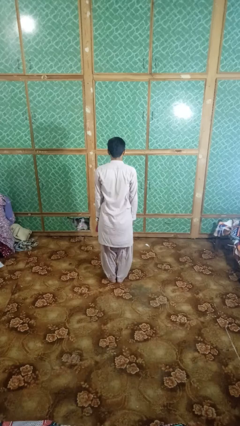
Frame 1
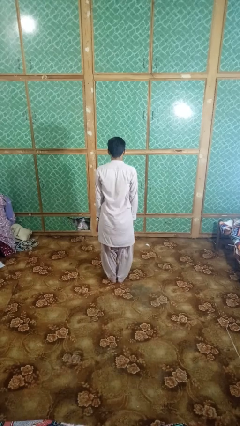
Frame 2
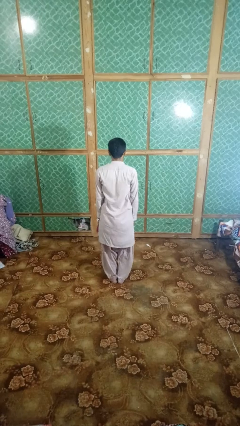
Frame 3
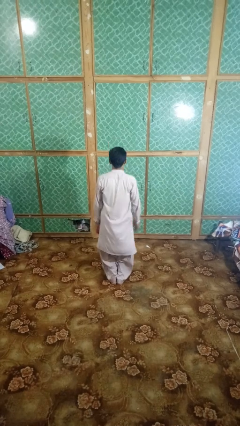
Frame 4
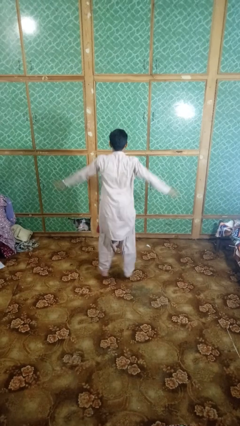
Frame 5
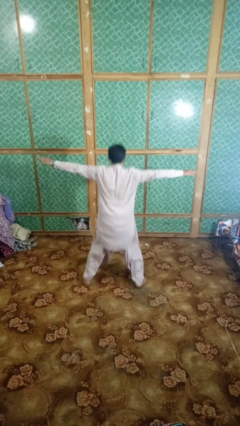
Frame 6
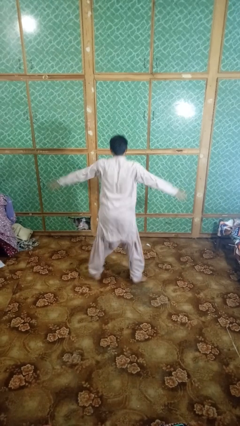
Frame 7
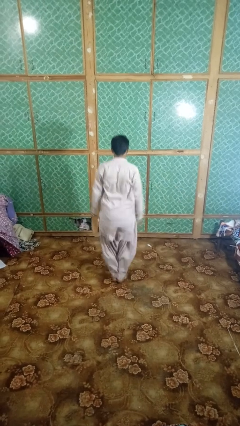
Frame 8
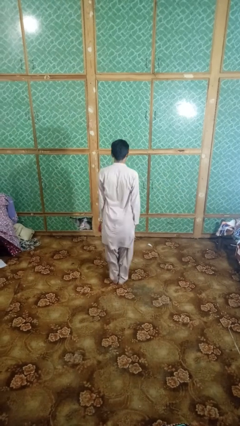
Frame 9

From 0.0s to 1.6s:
person exercises with jumping jacks

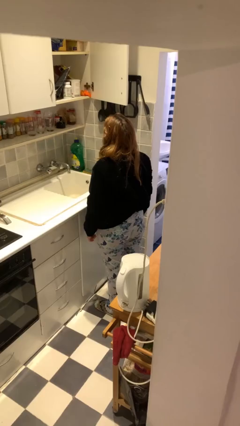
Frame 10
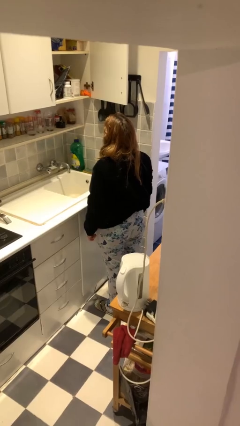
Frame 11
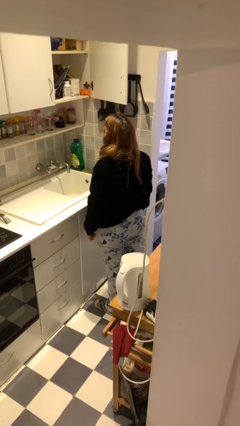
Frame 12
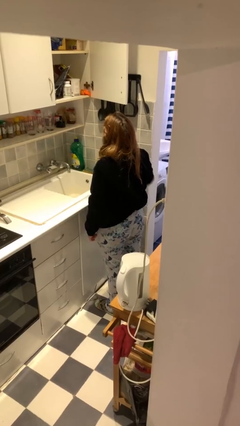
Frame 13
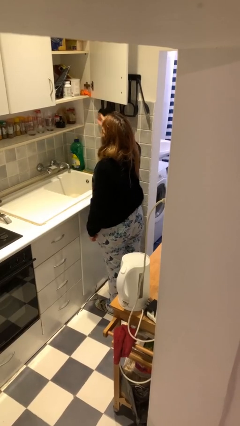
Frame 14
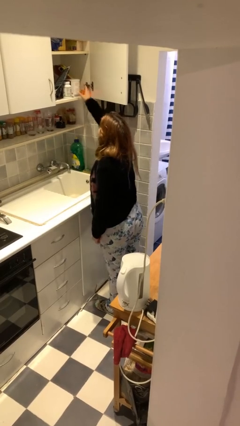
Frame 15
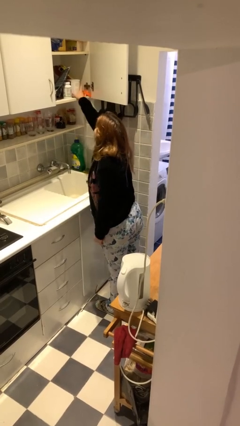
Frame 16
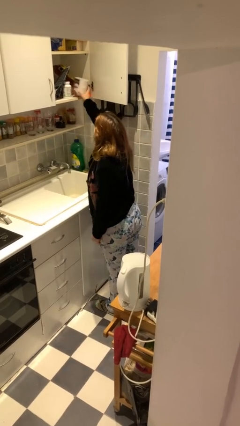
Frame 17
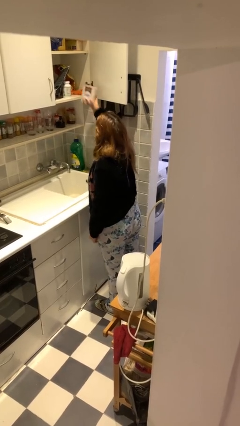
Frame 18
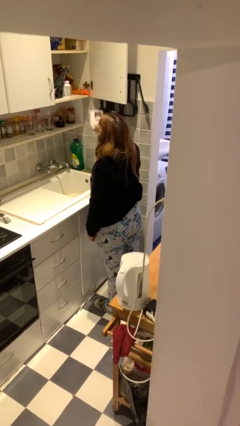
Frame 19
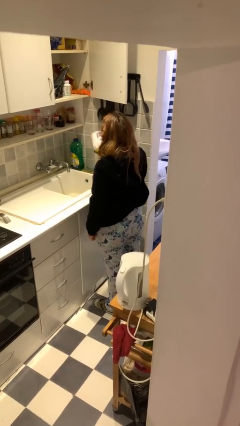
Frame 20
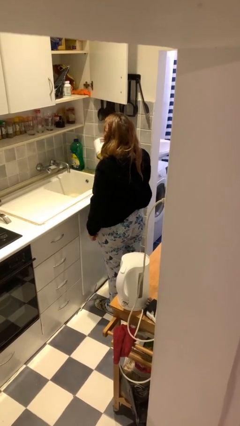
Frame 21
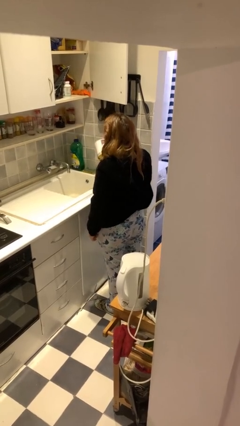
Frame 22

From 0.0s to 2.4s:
person takes object from cabinet

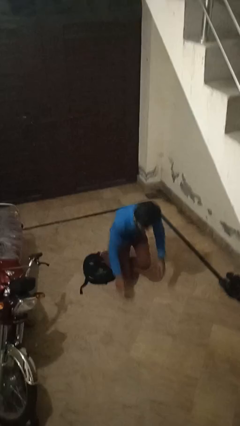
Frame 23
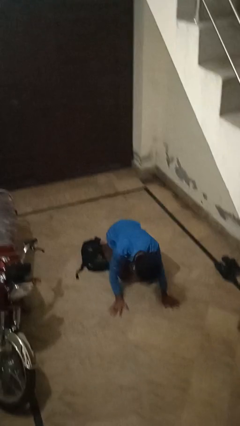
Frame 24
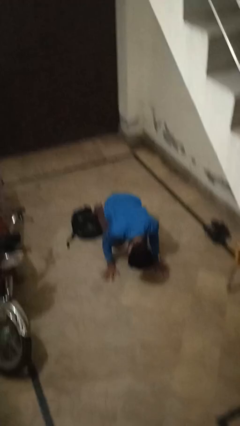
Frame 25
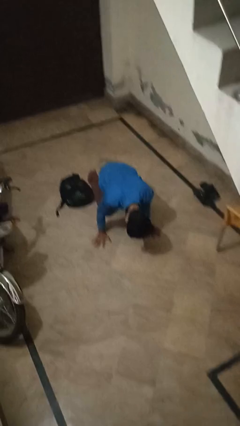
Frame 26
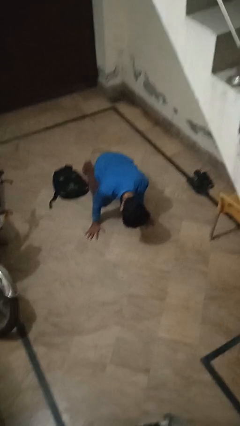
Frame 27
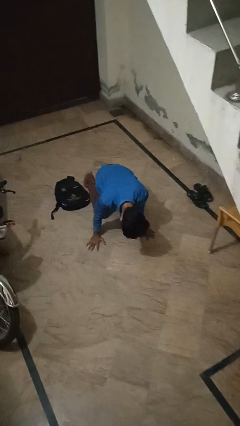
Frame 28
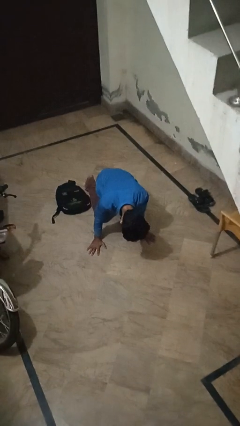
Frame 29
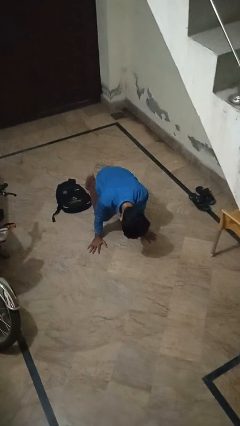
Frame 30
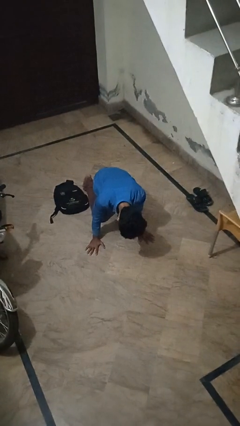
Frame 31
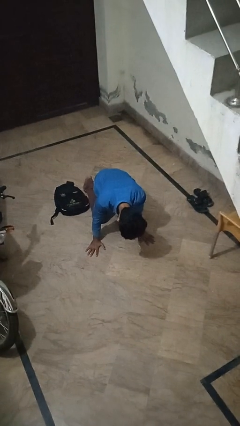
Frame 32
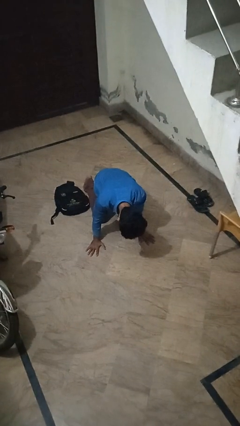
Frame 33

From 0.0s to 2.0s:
person trips on object on floor

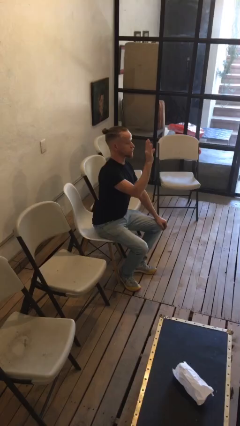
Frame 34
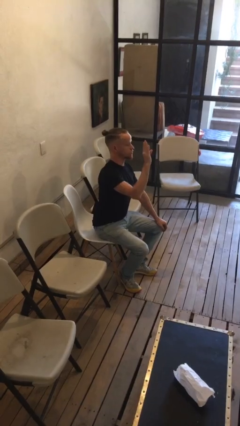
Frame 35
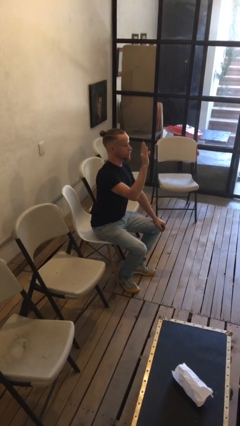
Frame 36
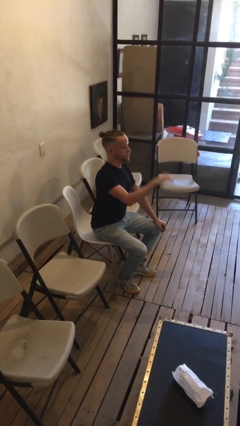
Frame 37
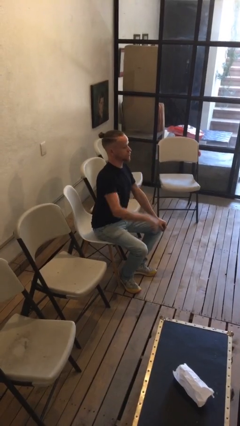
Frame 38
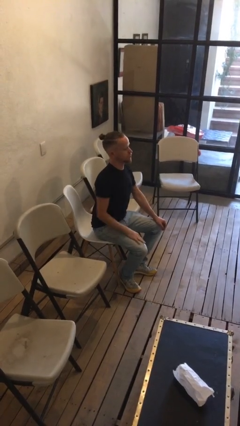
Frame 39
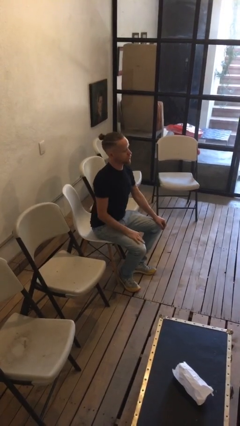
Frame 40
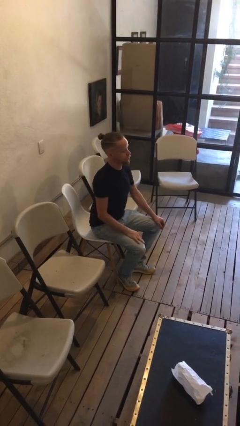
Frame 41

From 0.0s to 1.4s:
person gestures lower hand

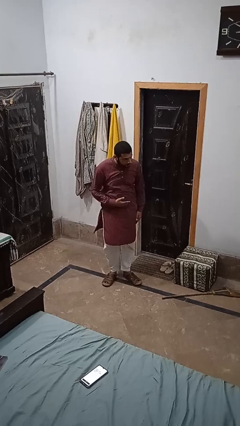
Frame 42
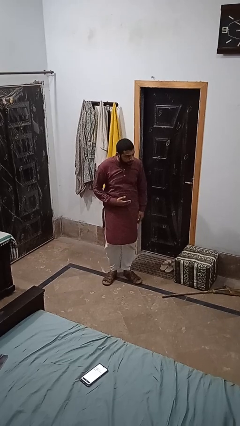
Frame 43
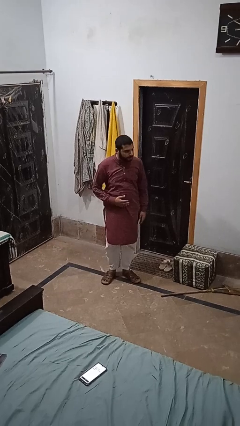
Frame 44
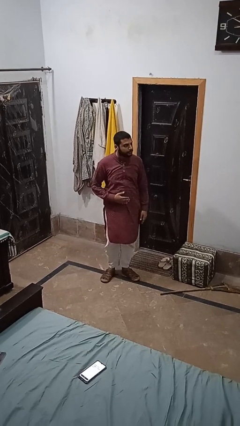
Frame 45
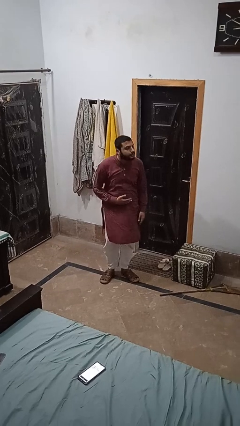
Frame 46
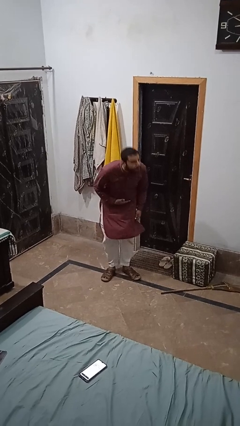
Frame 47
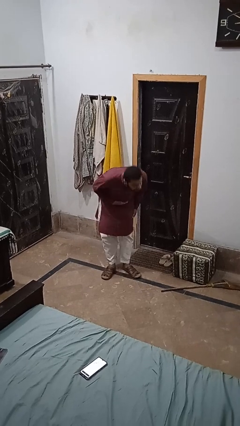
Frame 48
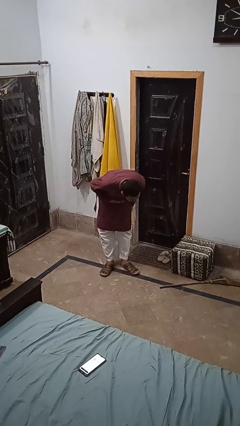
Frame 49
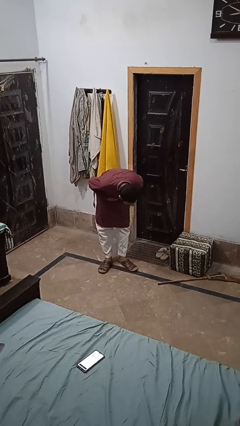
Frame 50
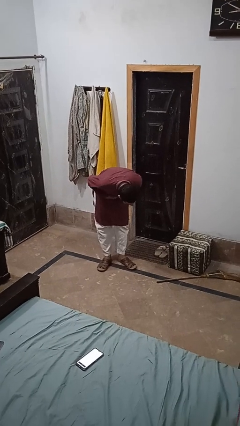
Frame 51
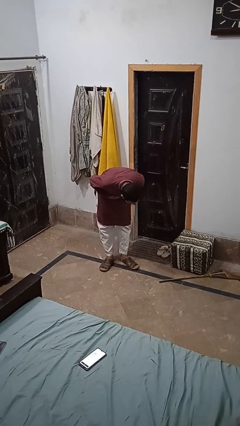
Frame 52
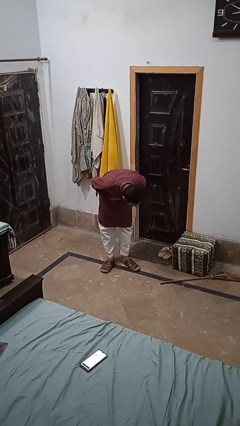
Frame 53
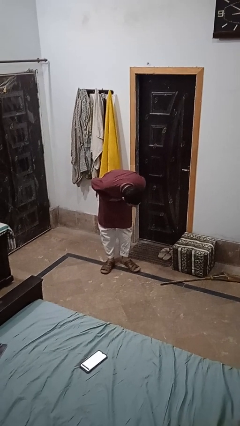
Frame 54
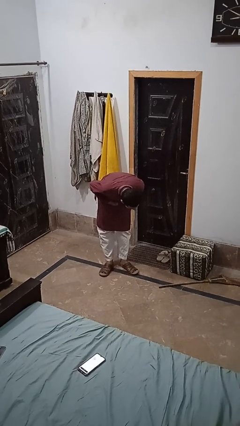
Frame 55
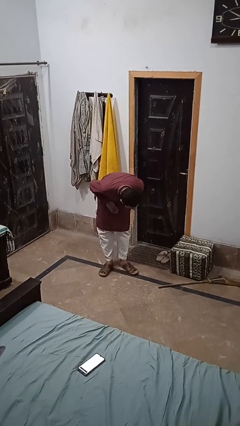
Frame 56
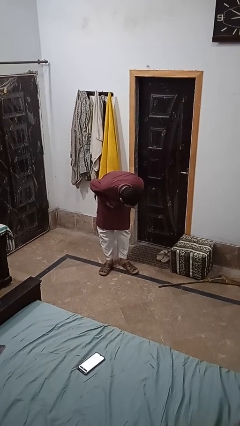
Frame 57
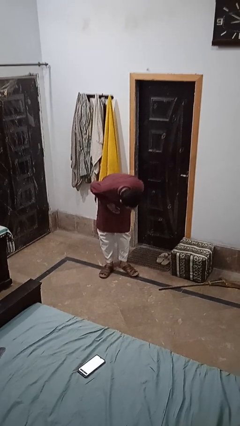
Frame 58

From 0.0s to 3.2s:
person bows

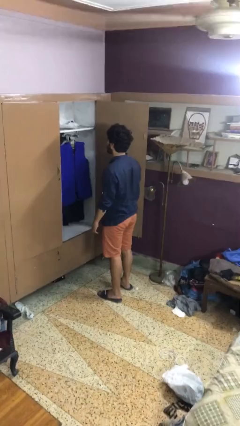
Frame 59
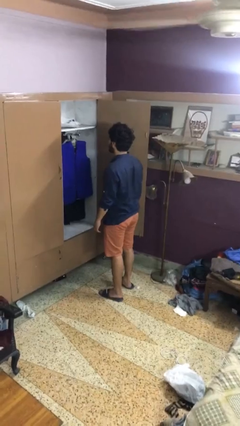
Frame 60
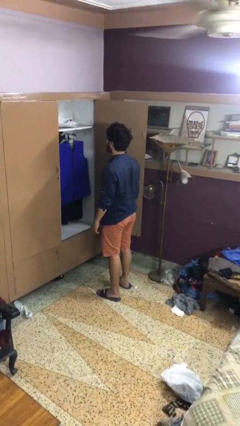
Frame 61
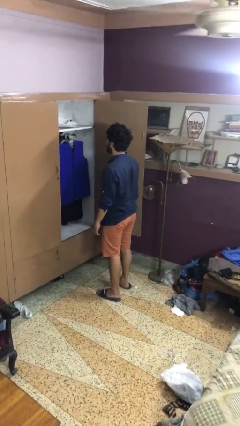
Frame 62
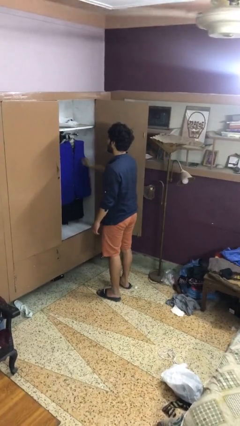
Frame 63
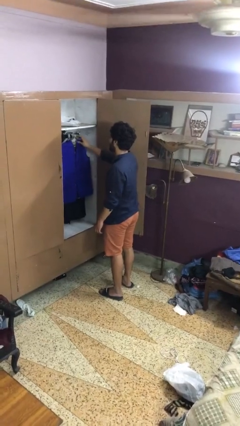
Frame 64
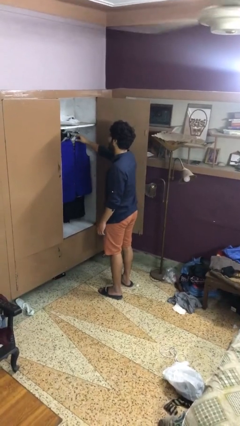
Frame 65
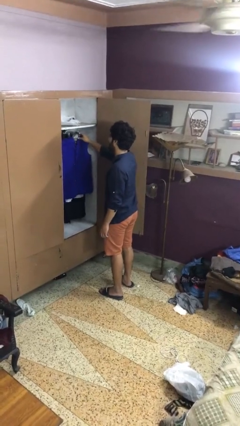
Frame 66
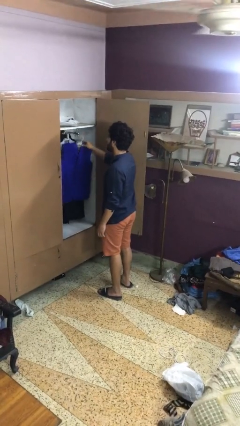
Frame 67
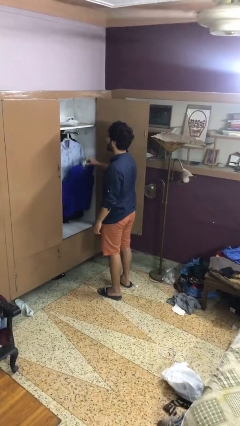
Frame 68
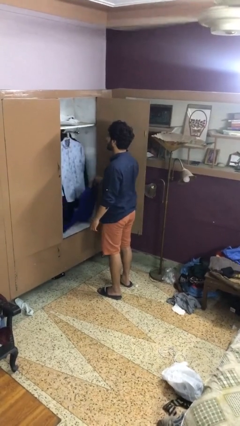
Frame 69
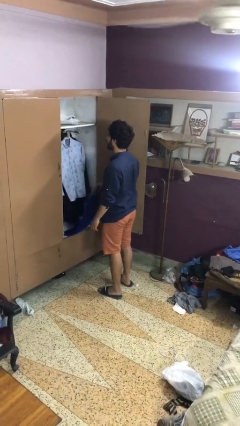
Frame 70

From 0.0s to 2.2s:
person takes clothes from closet

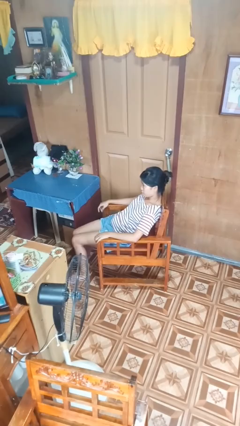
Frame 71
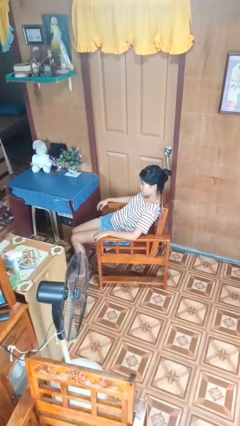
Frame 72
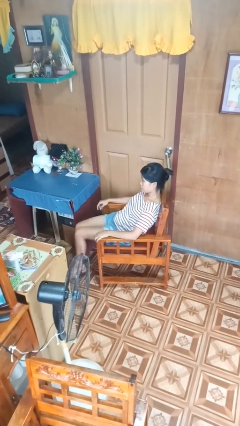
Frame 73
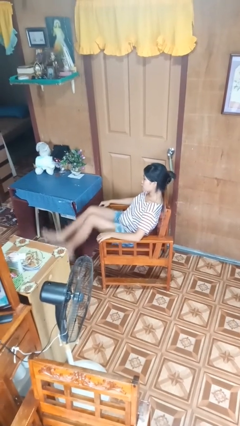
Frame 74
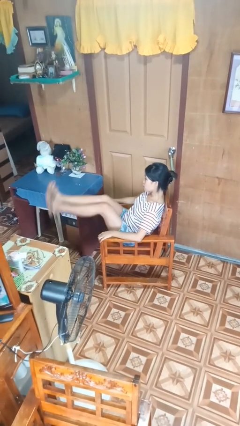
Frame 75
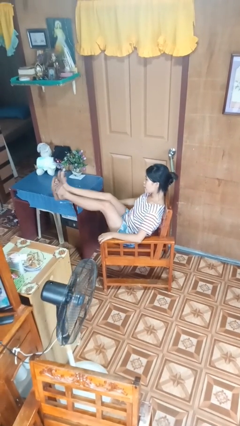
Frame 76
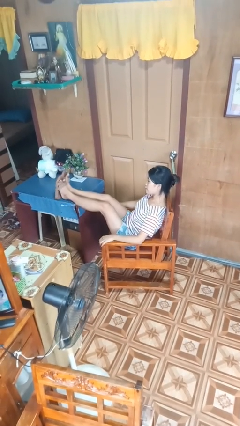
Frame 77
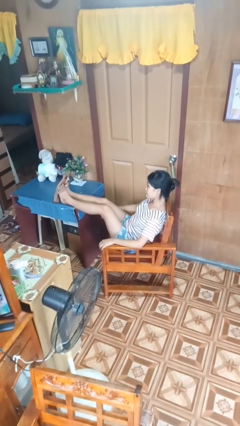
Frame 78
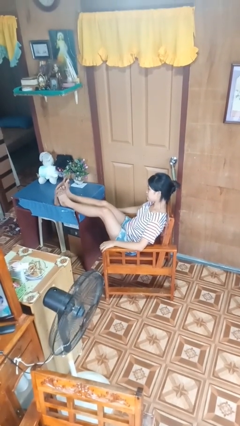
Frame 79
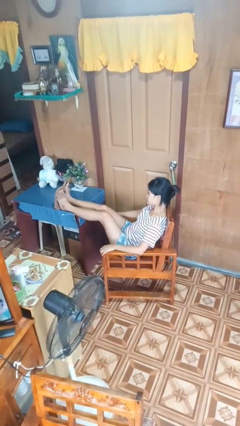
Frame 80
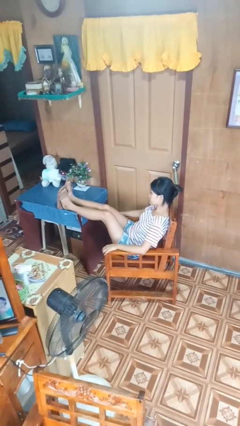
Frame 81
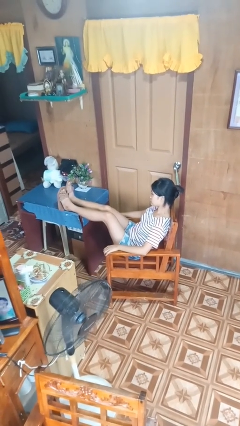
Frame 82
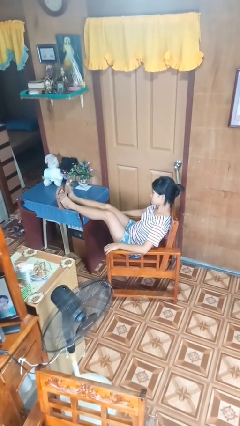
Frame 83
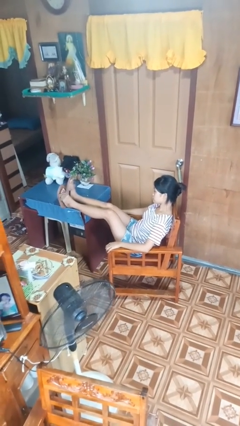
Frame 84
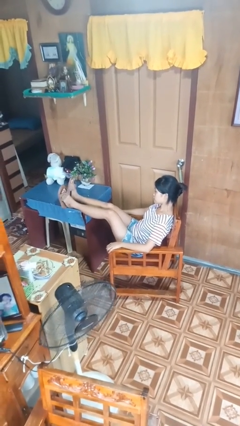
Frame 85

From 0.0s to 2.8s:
person puts feet up

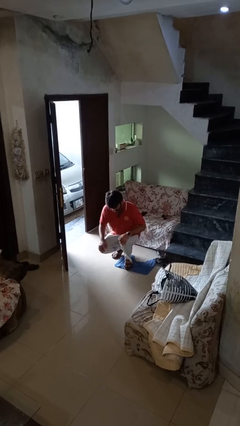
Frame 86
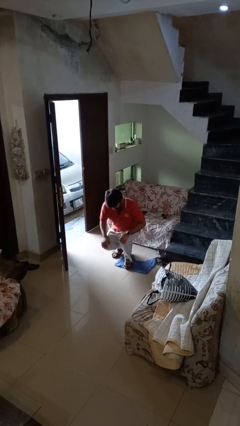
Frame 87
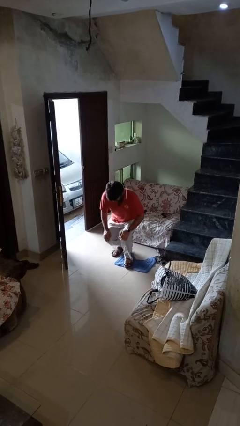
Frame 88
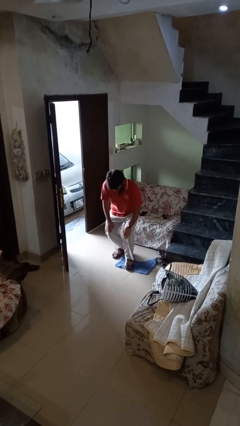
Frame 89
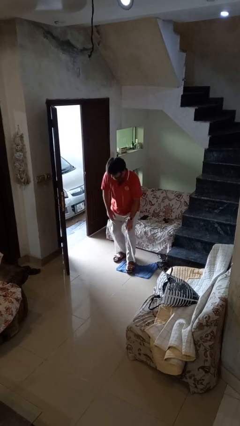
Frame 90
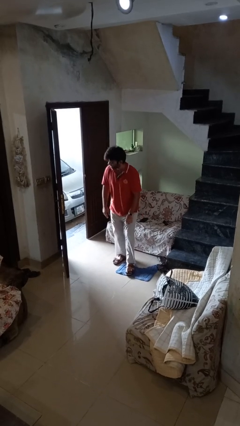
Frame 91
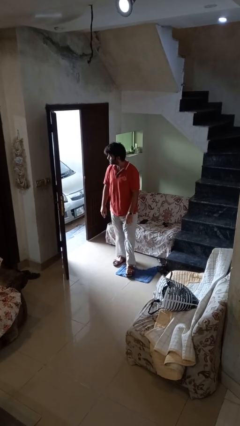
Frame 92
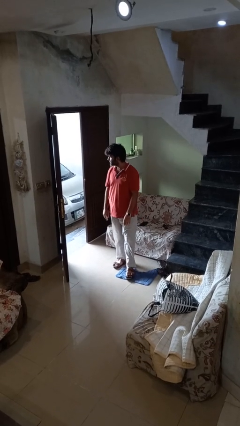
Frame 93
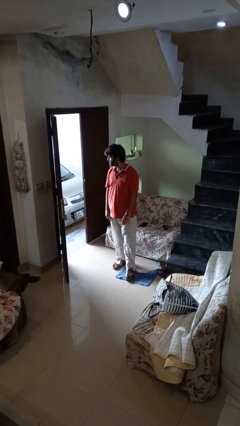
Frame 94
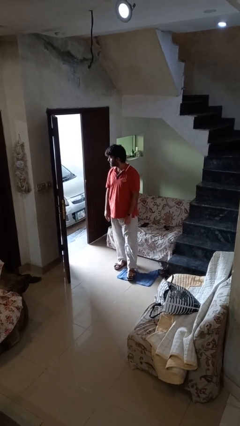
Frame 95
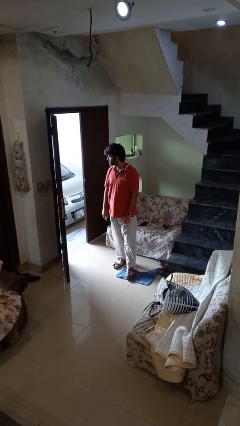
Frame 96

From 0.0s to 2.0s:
person stands up
